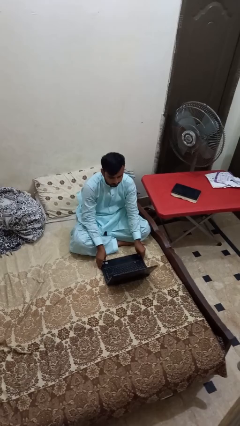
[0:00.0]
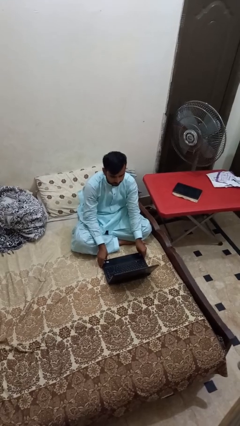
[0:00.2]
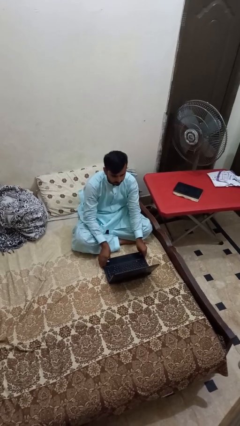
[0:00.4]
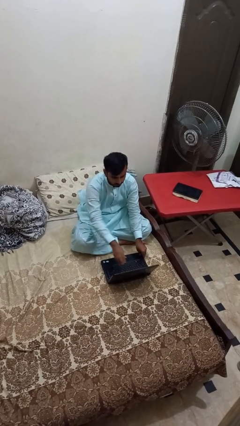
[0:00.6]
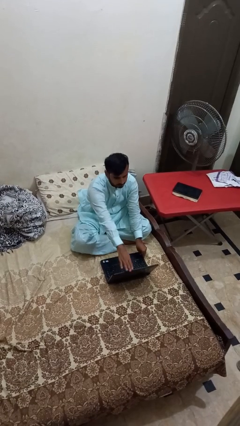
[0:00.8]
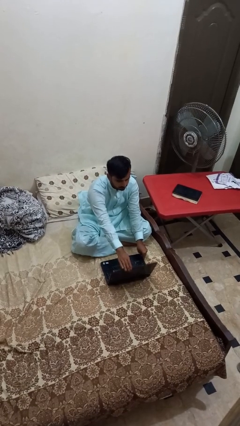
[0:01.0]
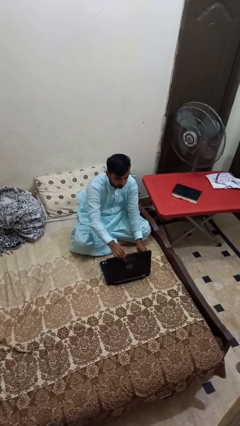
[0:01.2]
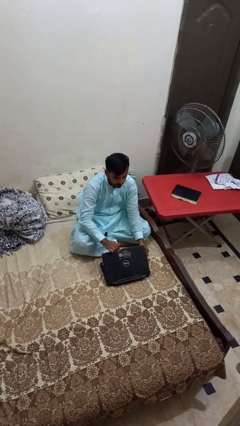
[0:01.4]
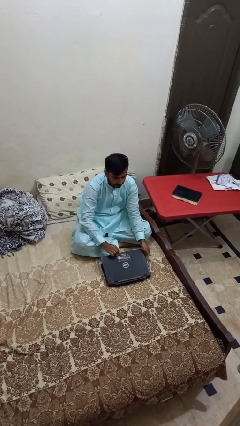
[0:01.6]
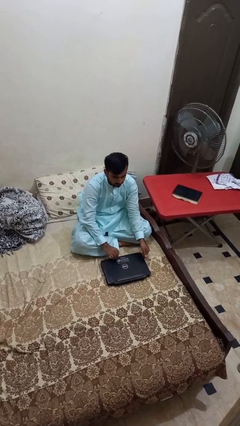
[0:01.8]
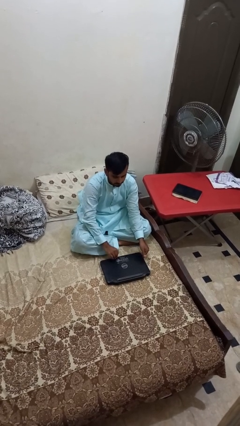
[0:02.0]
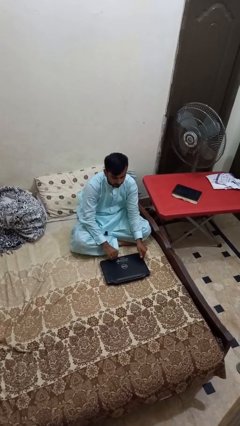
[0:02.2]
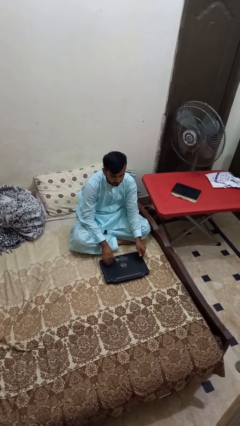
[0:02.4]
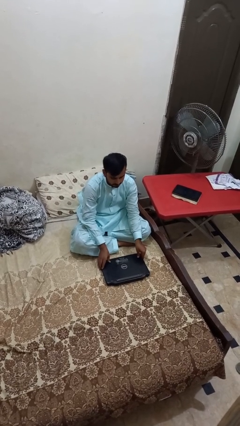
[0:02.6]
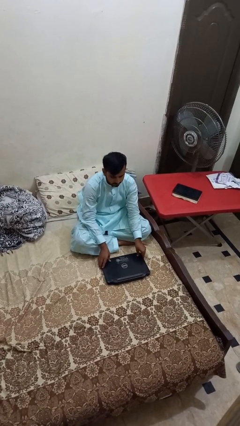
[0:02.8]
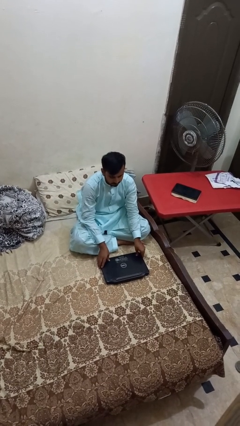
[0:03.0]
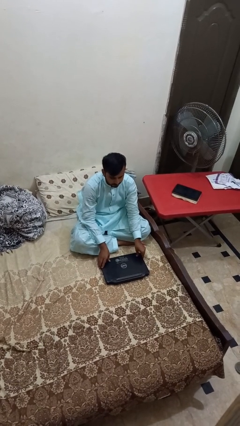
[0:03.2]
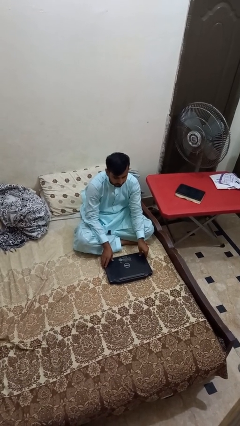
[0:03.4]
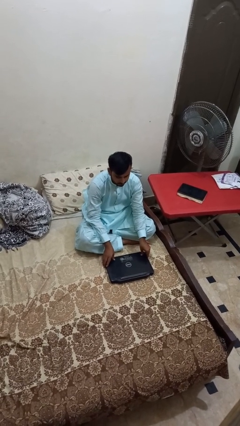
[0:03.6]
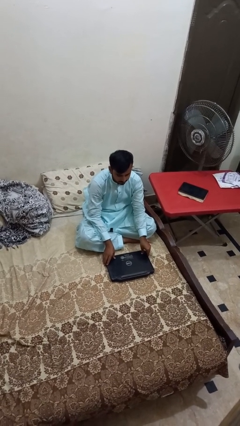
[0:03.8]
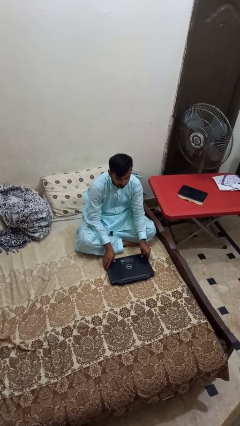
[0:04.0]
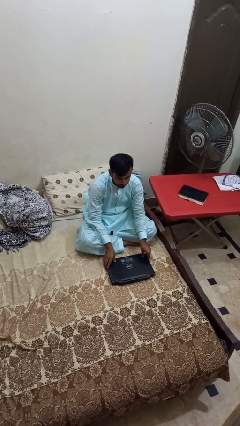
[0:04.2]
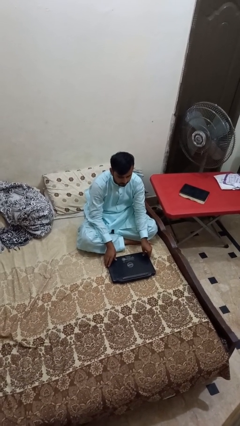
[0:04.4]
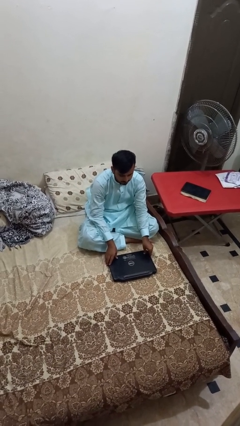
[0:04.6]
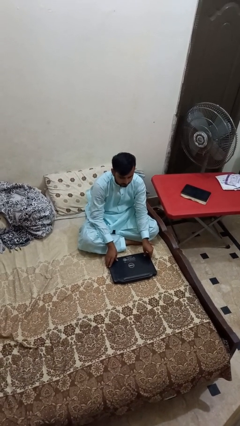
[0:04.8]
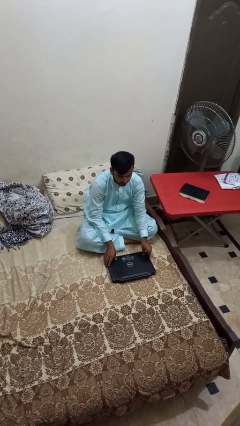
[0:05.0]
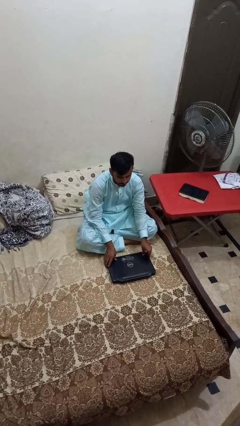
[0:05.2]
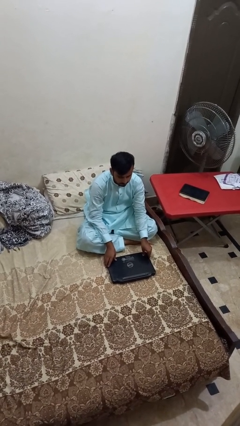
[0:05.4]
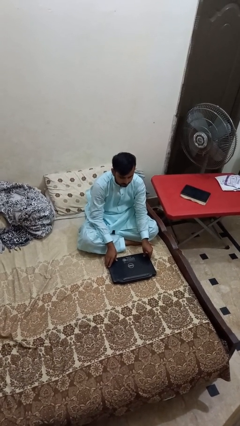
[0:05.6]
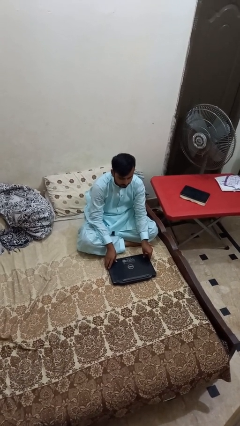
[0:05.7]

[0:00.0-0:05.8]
person closes laptop

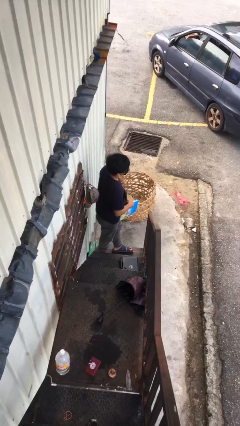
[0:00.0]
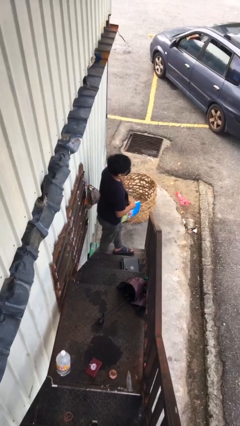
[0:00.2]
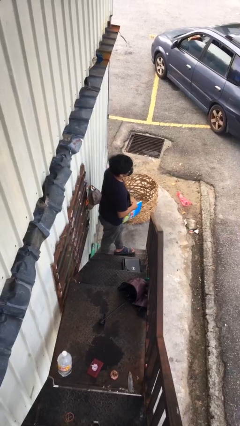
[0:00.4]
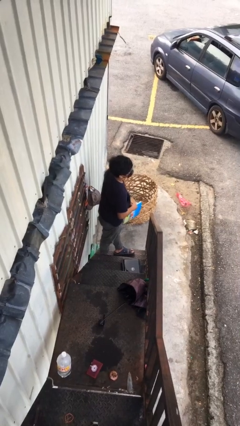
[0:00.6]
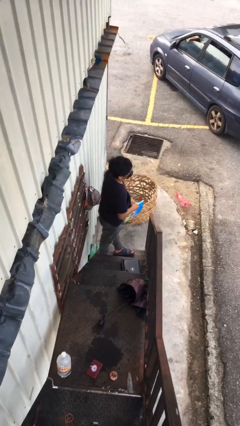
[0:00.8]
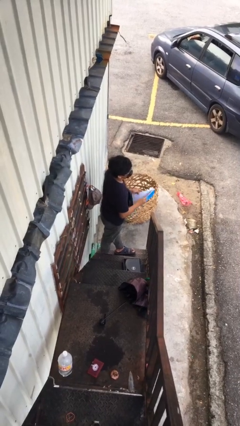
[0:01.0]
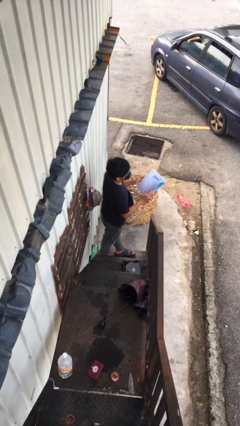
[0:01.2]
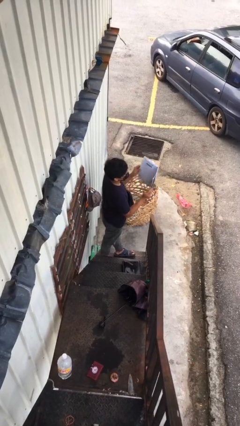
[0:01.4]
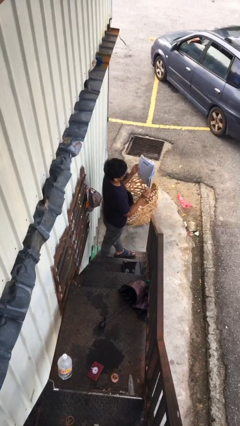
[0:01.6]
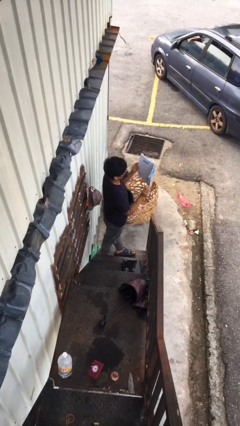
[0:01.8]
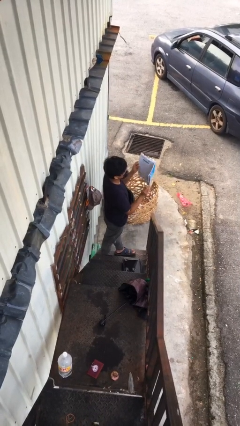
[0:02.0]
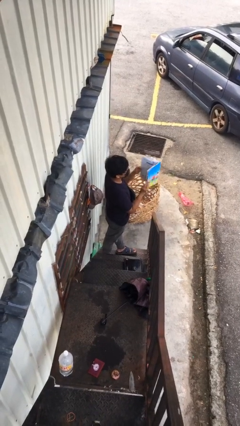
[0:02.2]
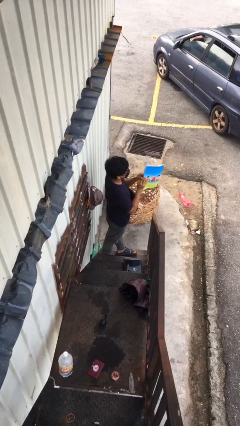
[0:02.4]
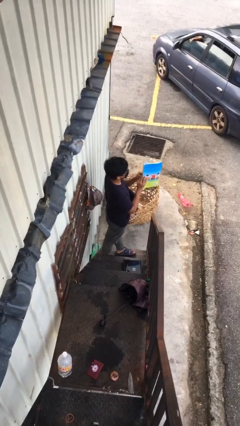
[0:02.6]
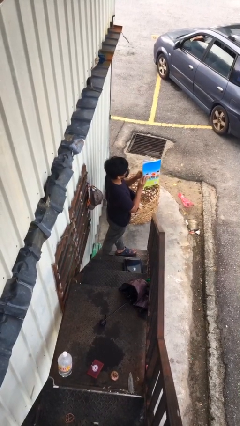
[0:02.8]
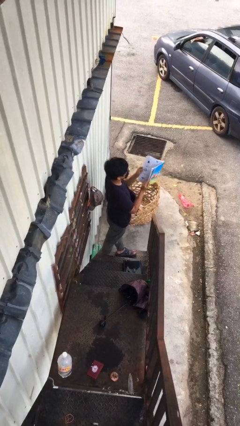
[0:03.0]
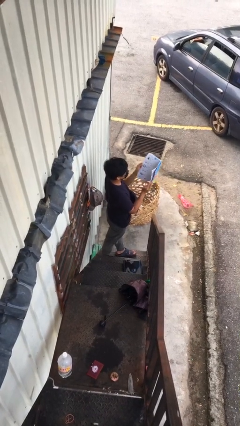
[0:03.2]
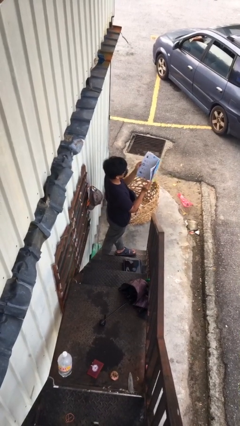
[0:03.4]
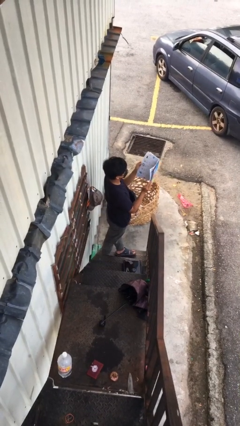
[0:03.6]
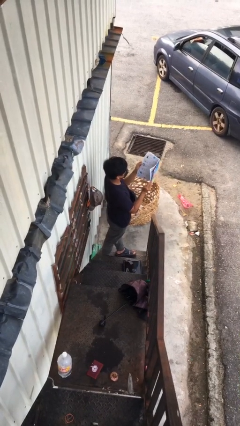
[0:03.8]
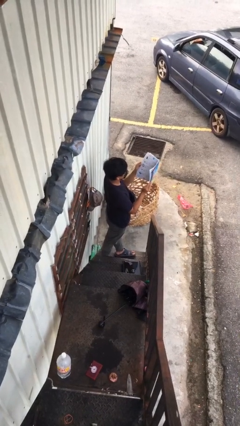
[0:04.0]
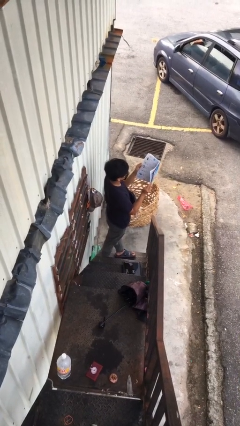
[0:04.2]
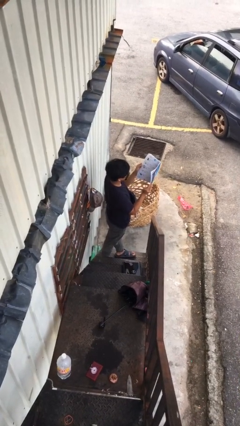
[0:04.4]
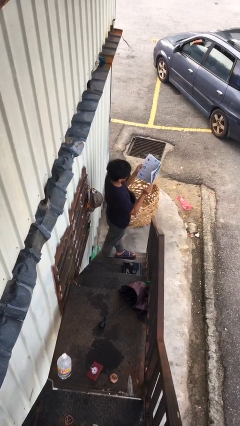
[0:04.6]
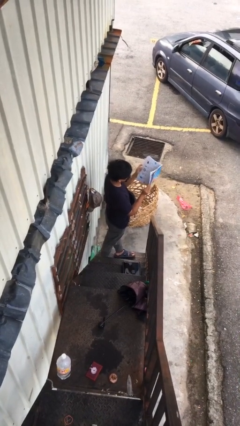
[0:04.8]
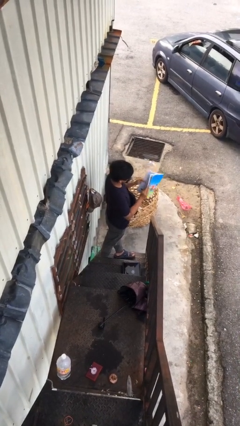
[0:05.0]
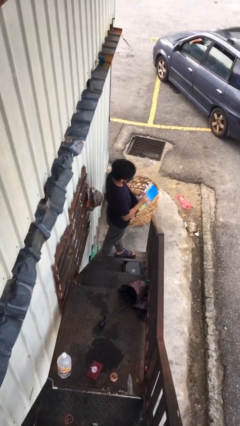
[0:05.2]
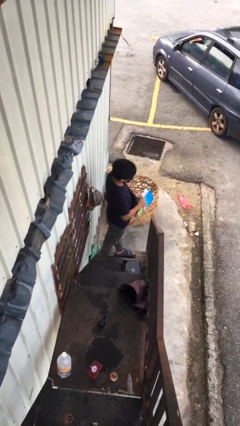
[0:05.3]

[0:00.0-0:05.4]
person reads document

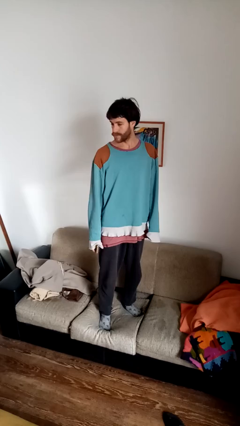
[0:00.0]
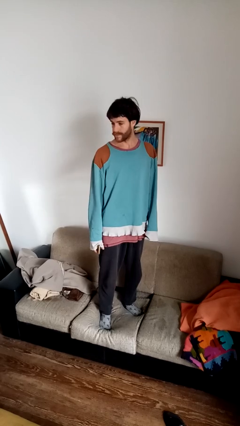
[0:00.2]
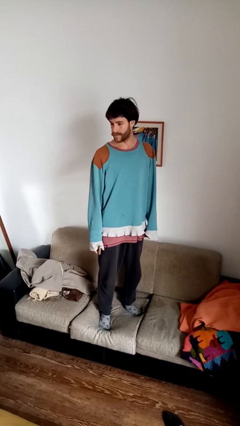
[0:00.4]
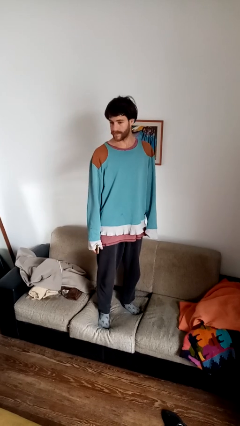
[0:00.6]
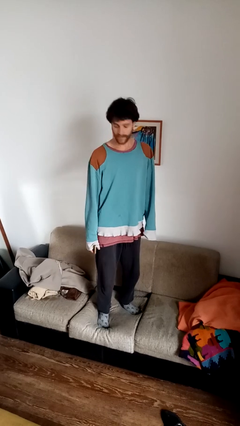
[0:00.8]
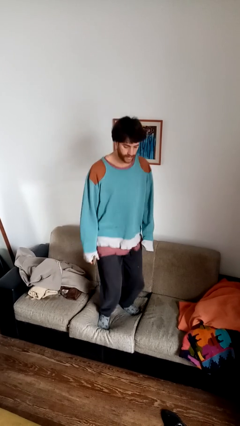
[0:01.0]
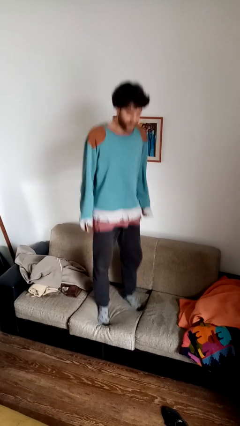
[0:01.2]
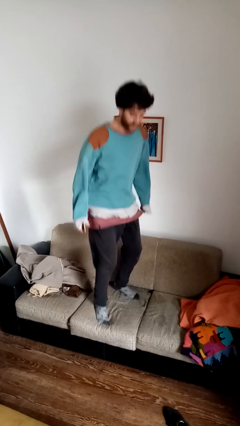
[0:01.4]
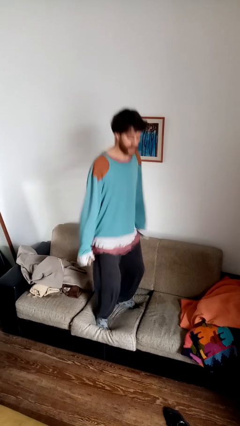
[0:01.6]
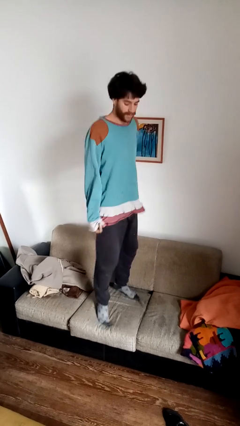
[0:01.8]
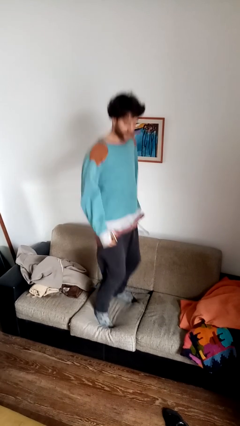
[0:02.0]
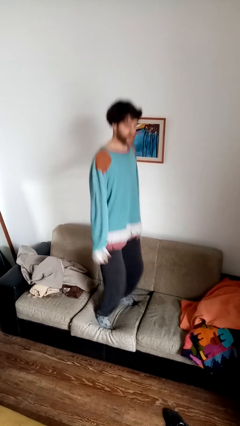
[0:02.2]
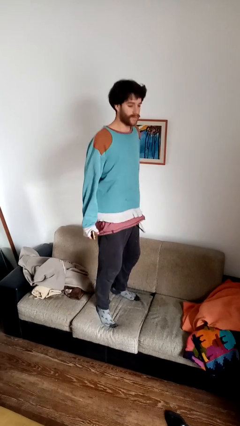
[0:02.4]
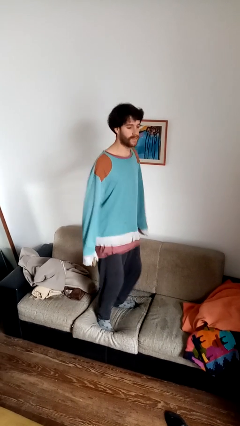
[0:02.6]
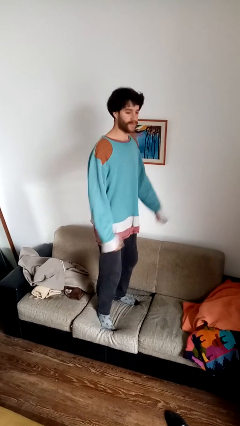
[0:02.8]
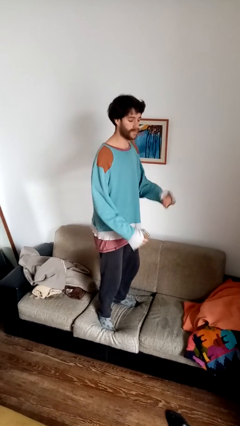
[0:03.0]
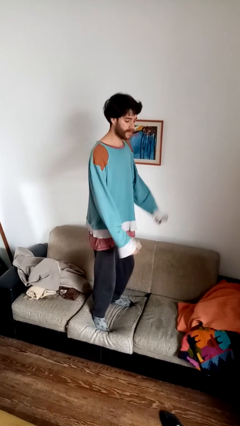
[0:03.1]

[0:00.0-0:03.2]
person jumps on couch

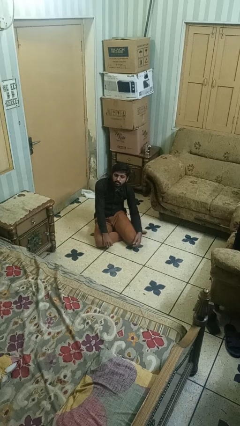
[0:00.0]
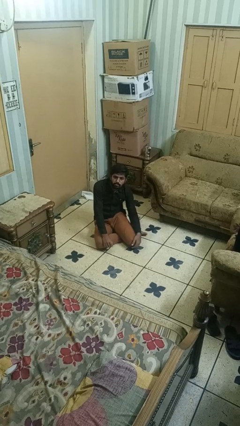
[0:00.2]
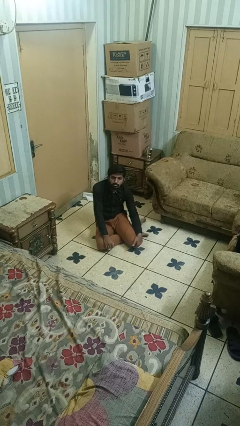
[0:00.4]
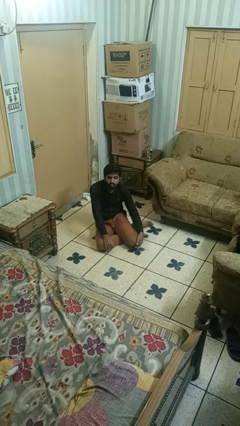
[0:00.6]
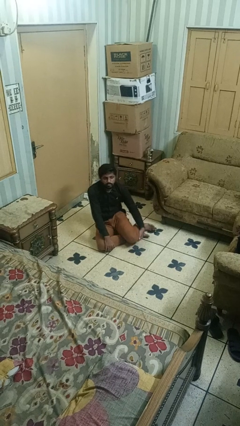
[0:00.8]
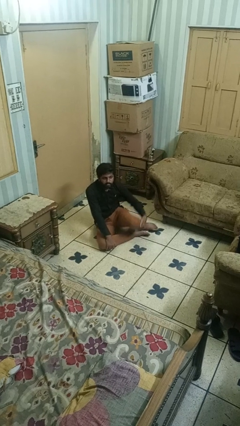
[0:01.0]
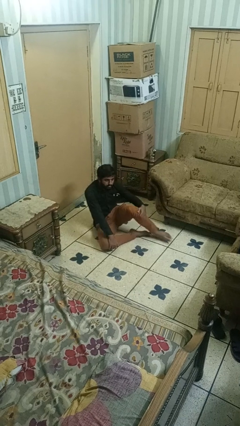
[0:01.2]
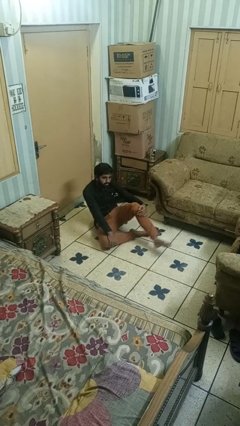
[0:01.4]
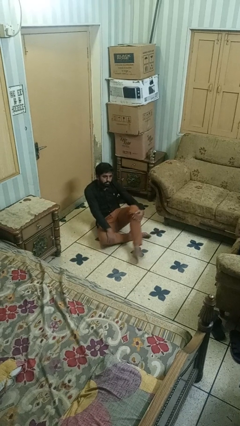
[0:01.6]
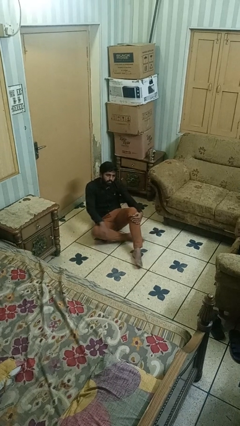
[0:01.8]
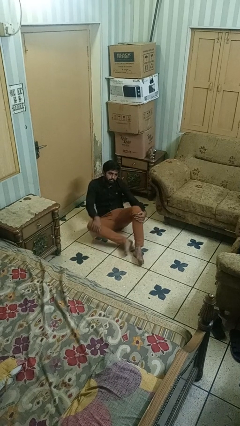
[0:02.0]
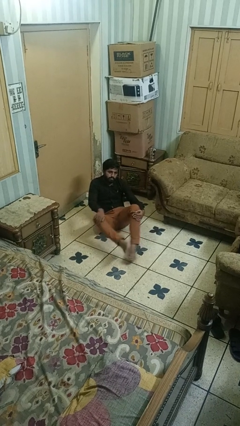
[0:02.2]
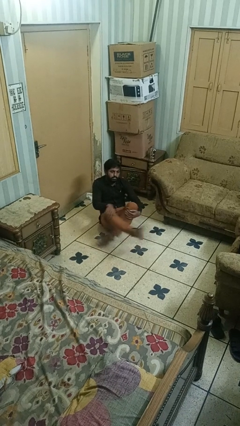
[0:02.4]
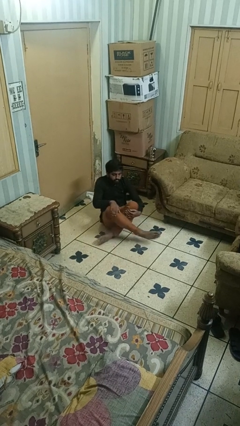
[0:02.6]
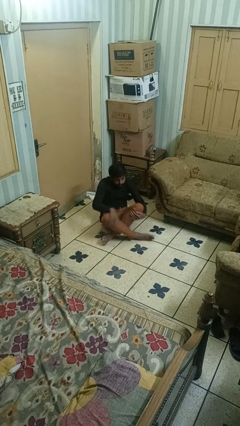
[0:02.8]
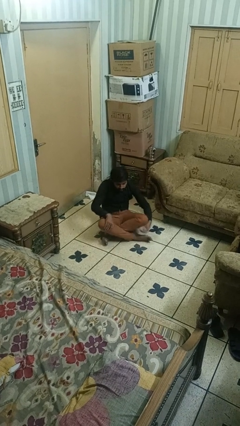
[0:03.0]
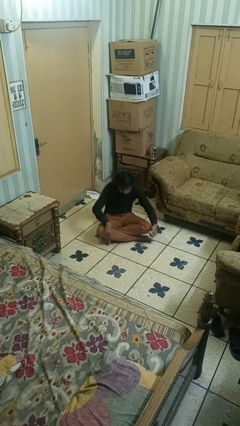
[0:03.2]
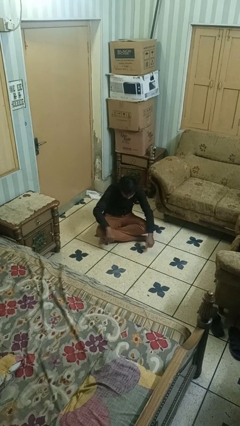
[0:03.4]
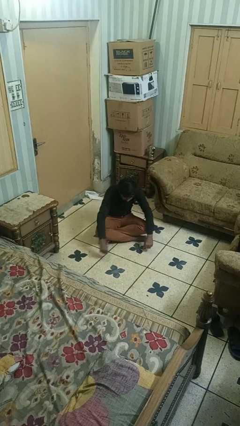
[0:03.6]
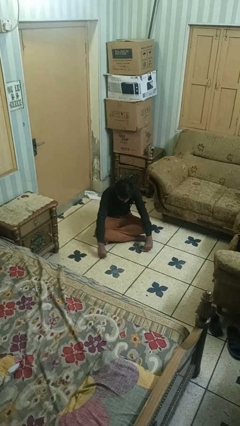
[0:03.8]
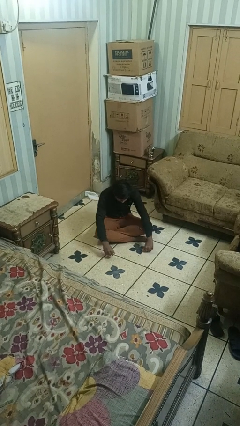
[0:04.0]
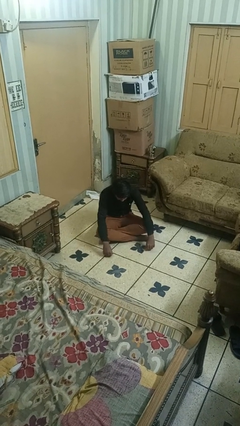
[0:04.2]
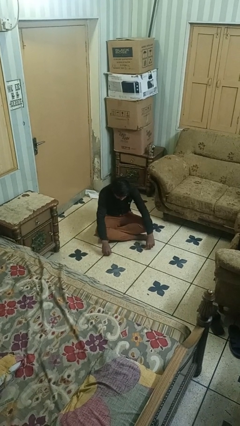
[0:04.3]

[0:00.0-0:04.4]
person crosses legs
